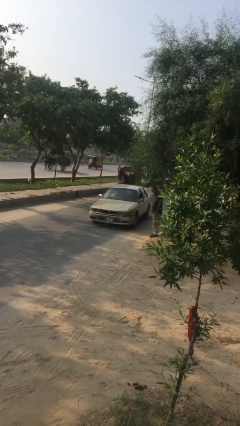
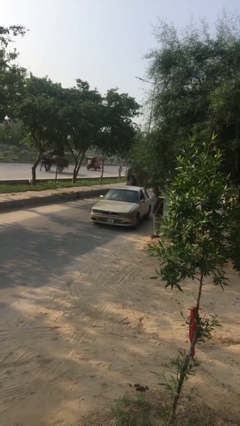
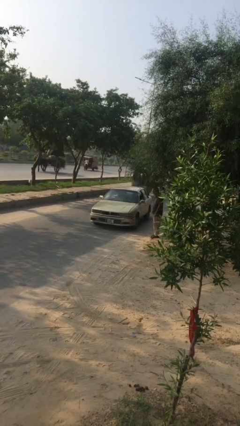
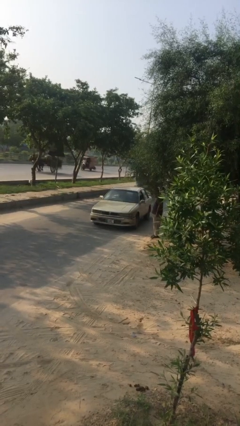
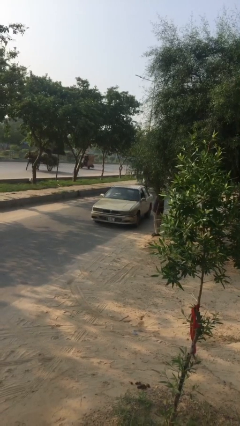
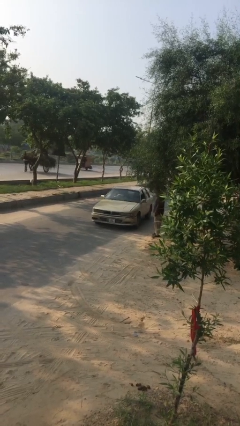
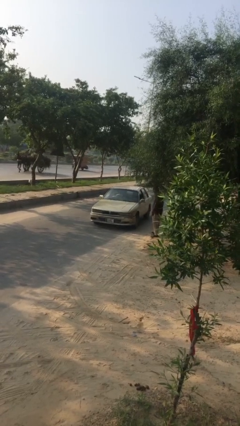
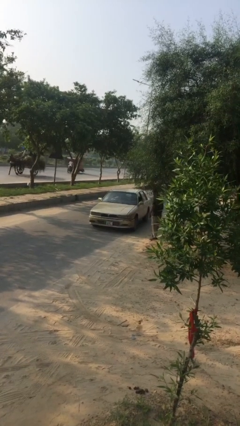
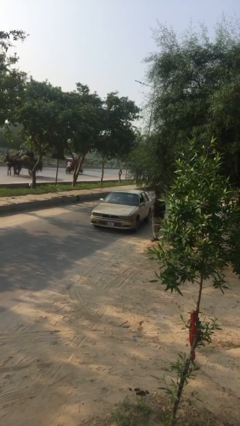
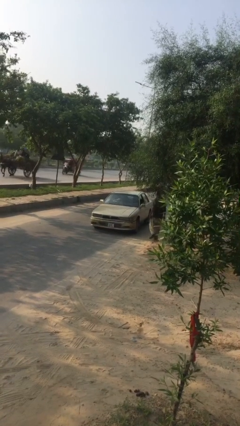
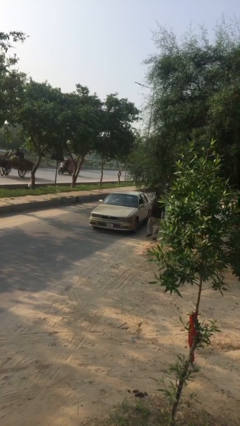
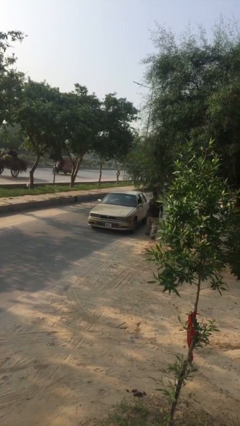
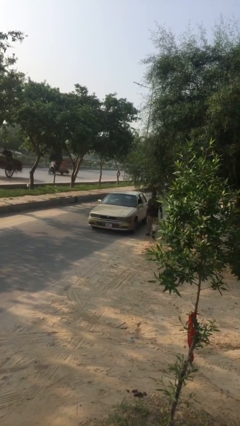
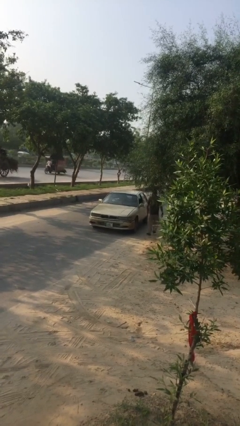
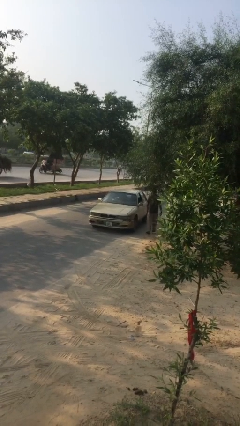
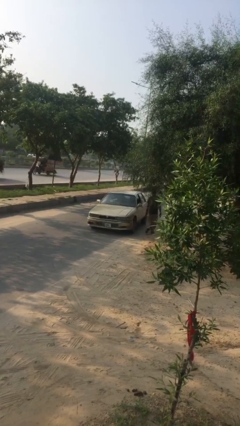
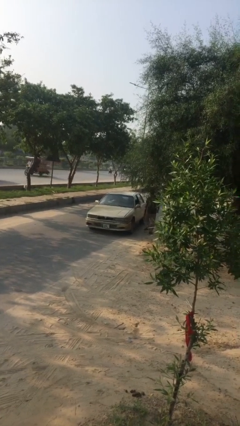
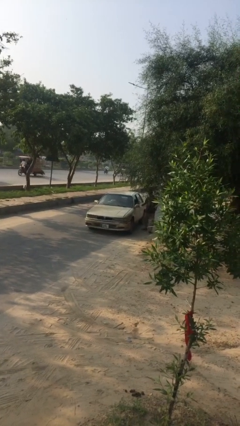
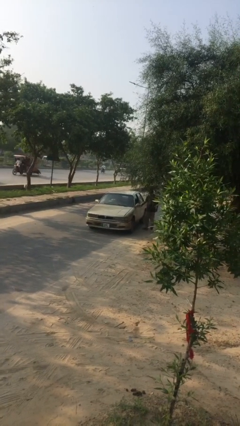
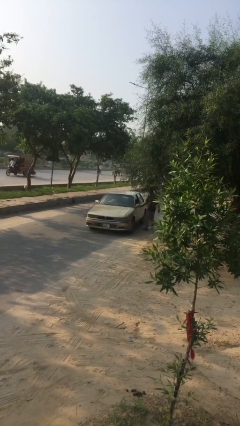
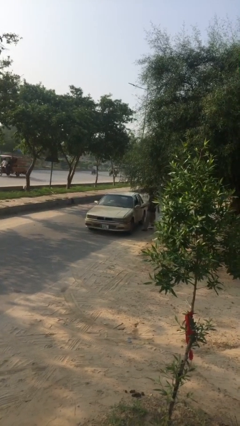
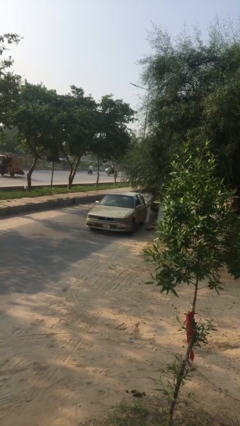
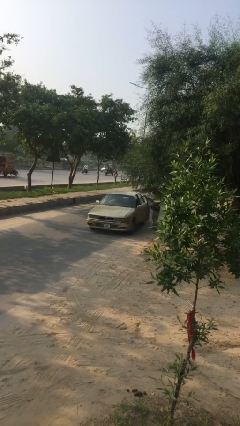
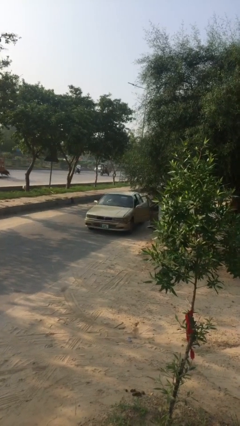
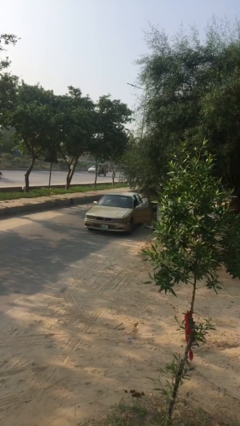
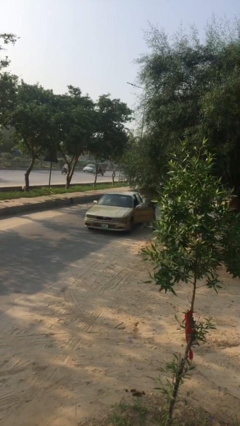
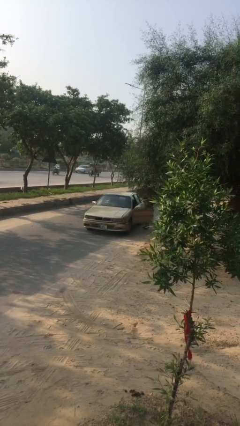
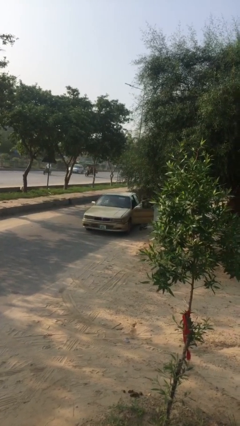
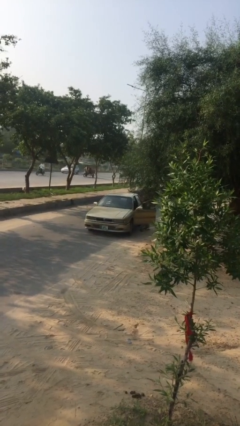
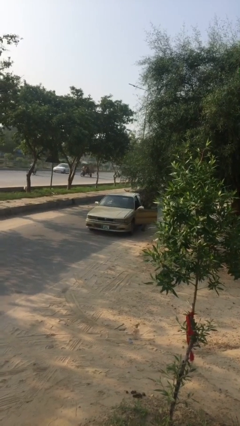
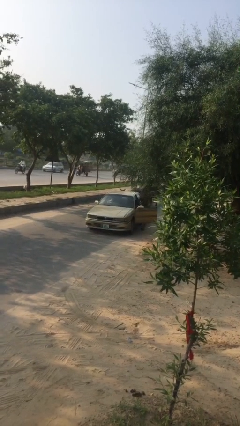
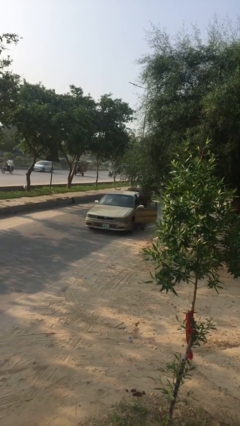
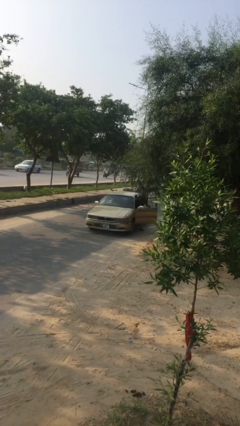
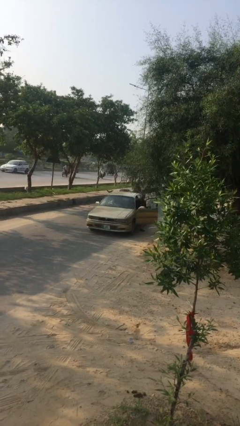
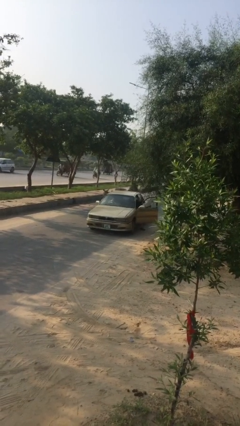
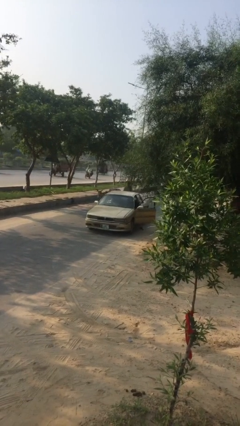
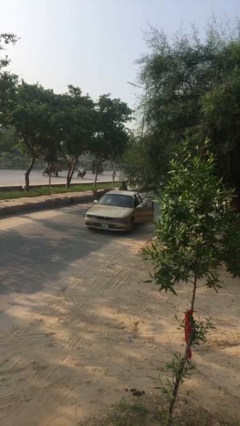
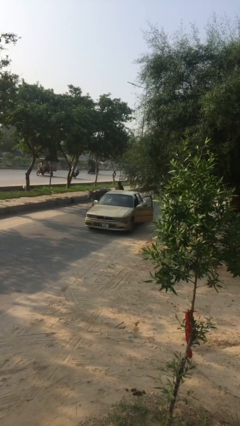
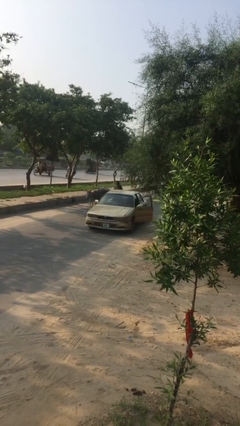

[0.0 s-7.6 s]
car picks up person

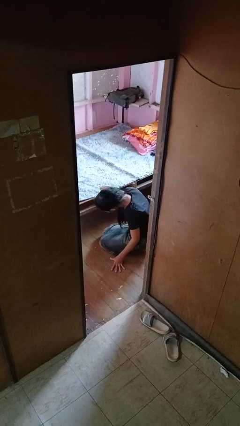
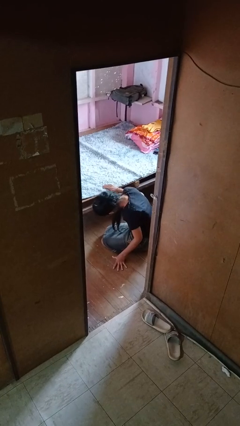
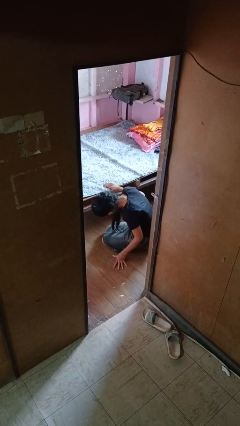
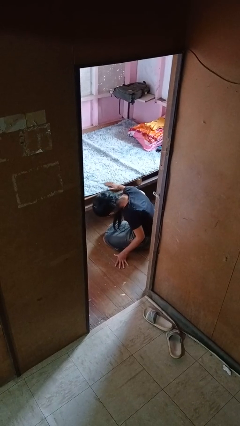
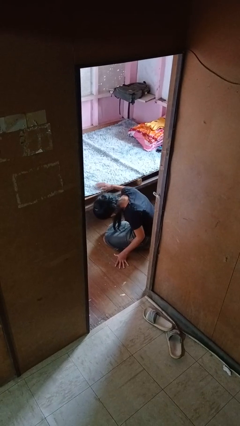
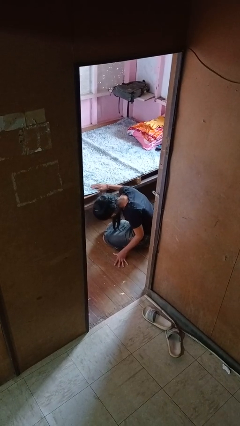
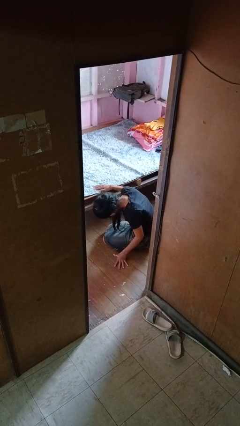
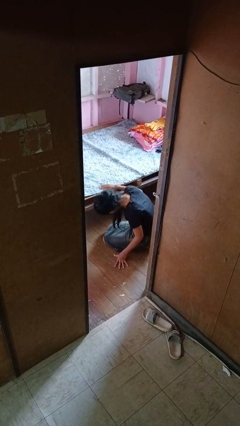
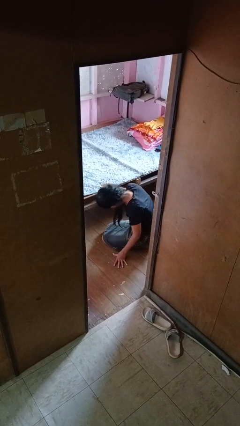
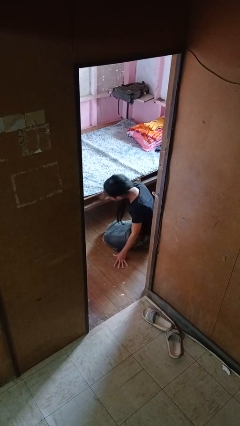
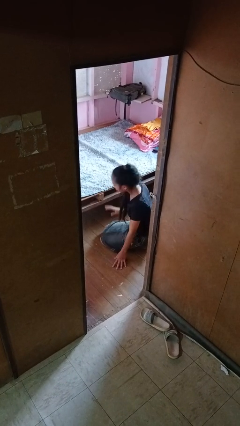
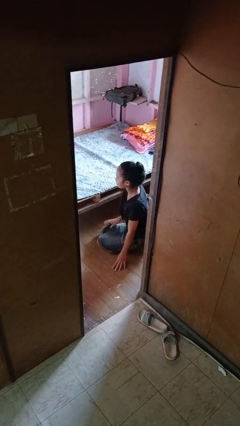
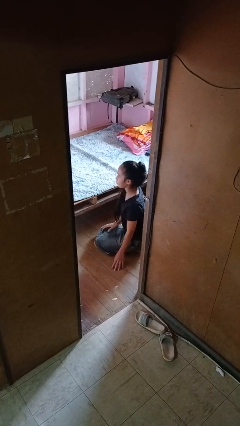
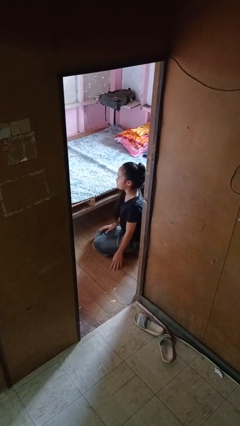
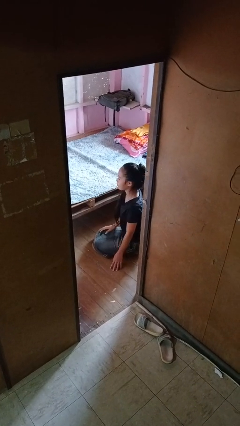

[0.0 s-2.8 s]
person searches under bed

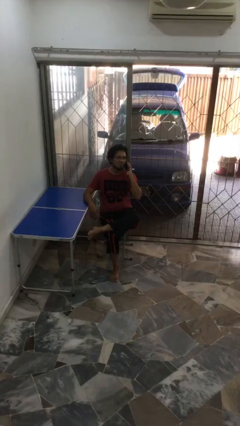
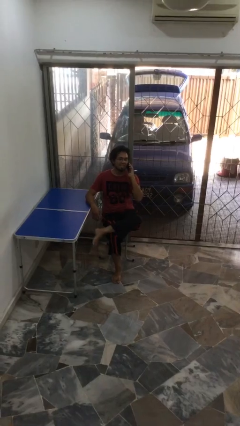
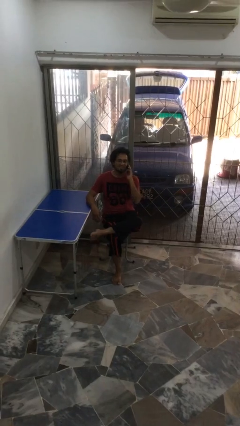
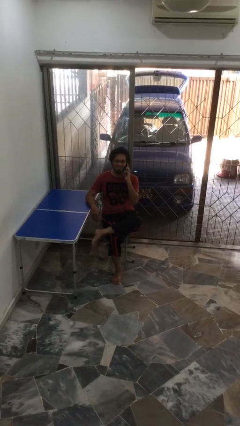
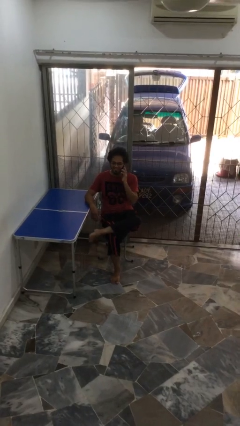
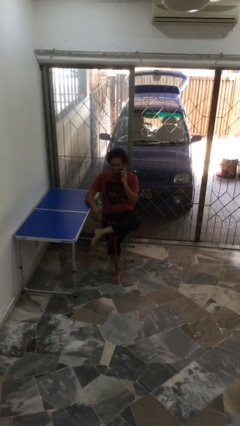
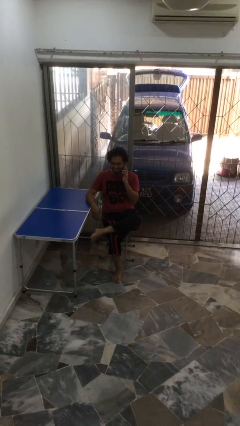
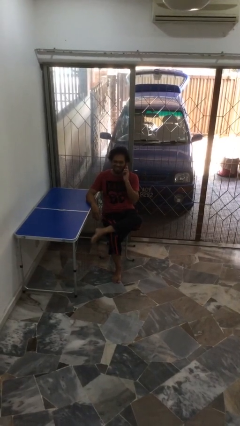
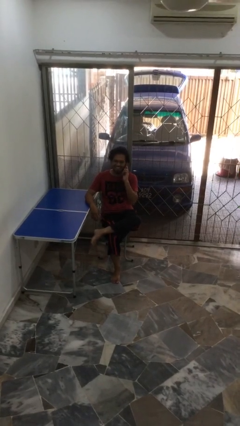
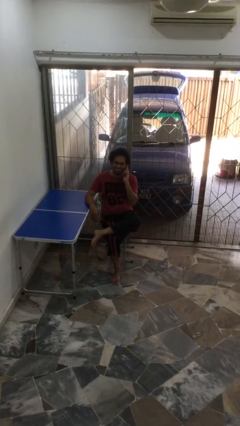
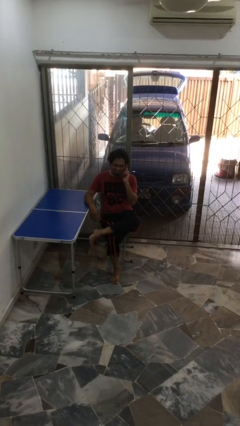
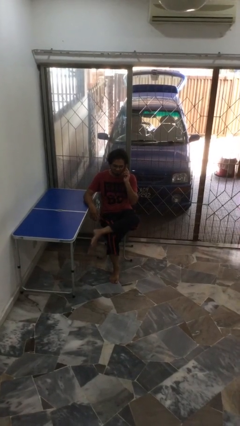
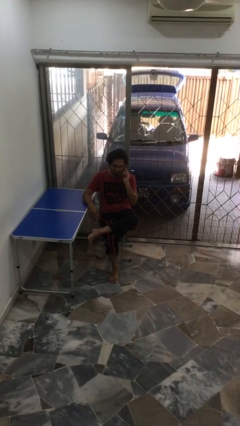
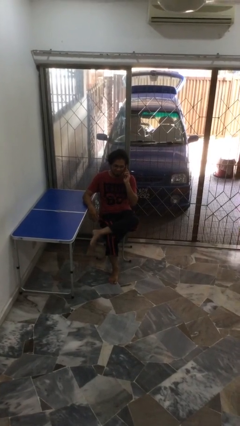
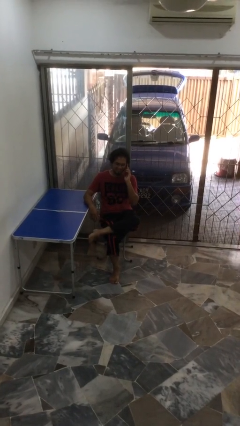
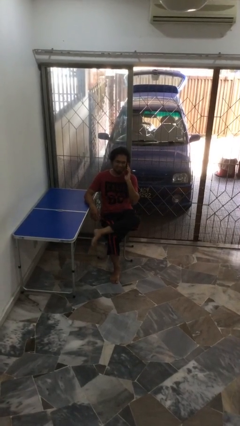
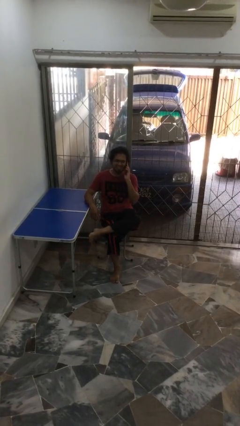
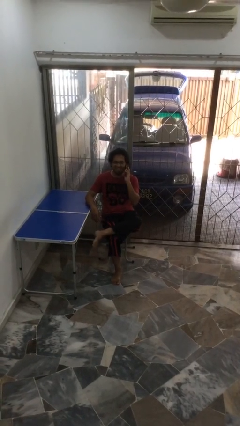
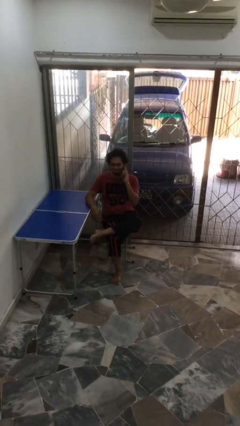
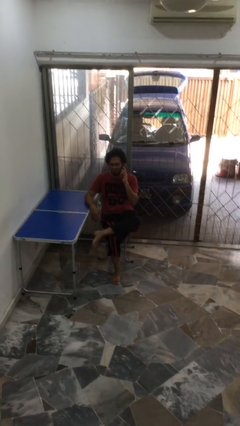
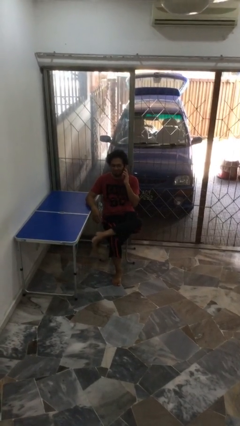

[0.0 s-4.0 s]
person talks on phone

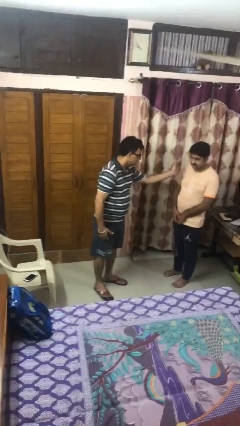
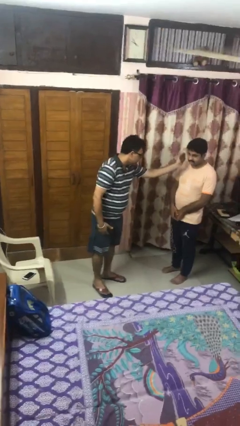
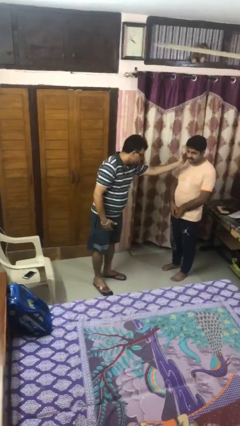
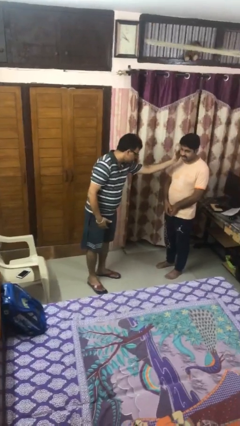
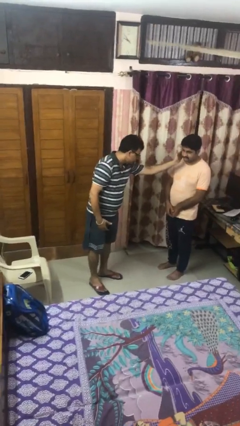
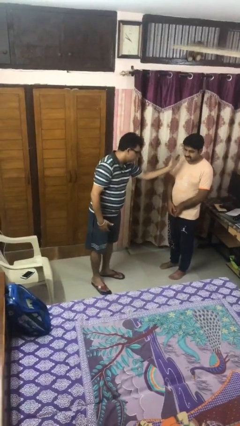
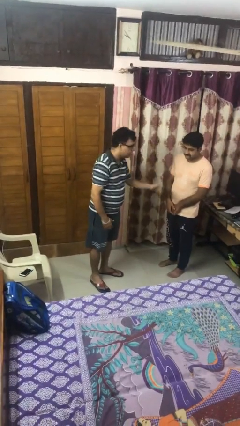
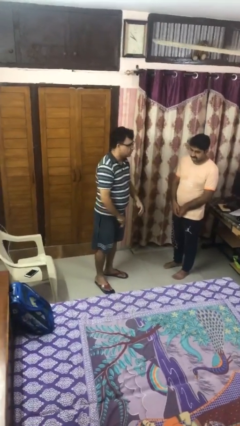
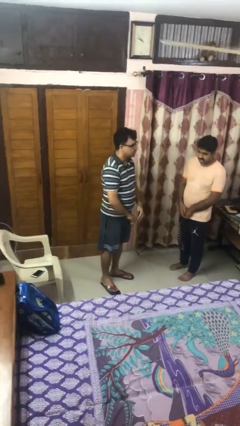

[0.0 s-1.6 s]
person touches face of person

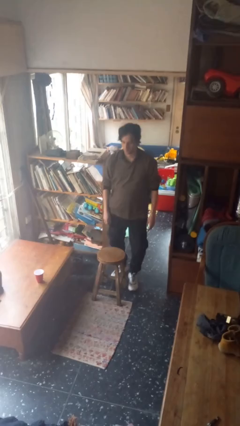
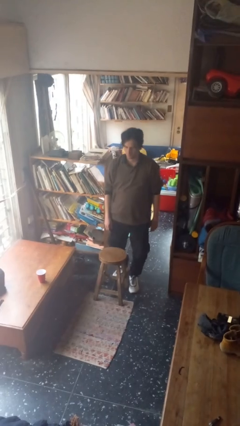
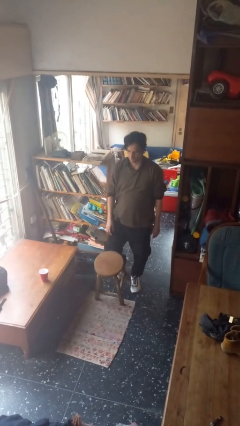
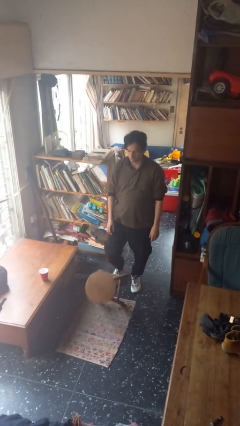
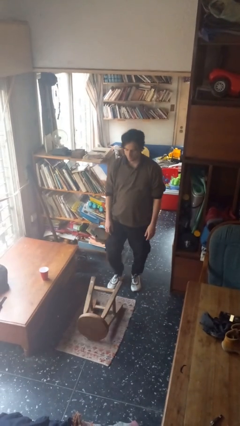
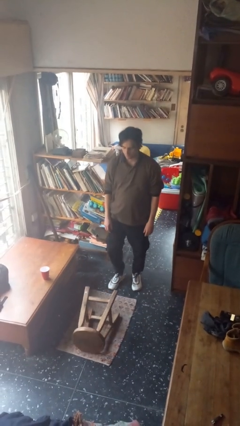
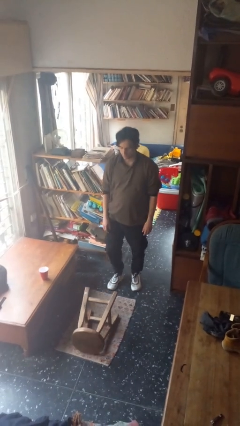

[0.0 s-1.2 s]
person knocks over furniture

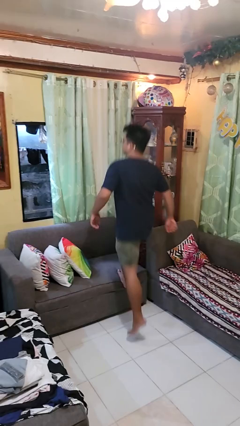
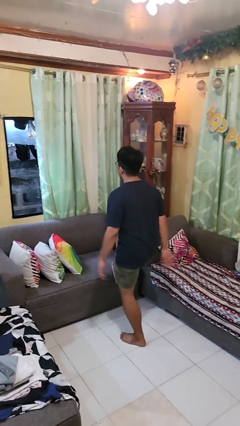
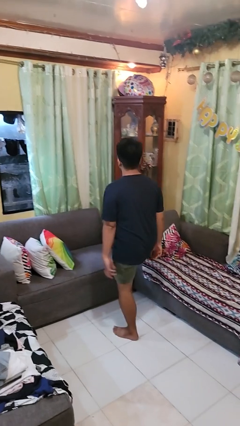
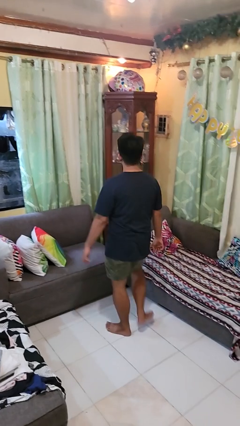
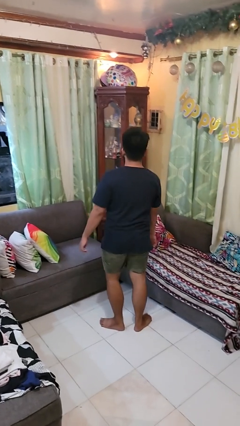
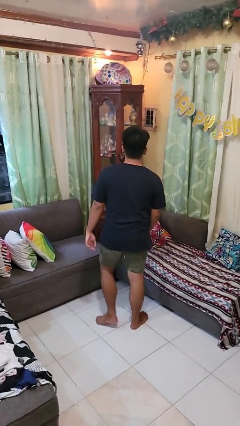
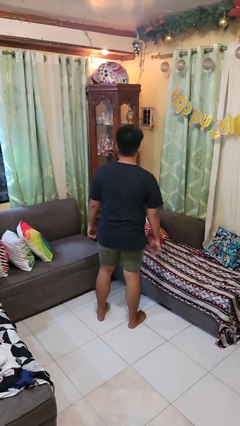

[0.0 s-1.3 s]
person climbs off couch
